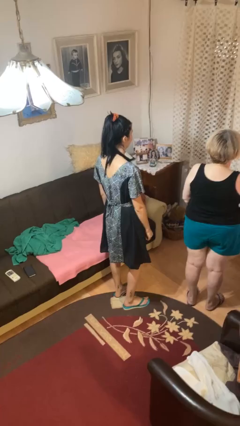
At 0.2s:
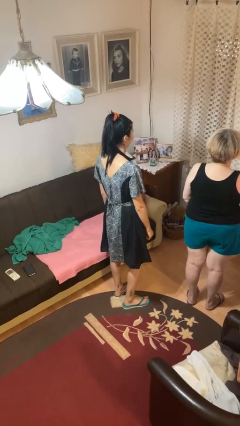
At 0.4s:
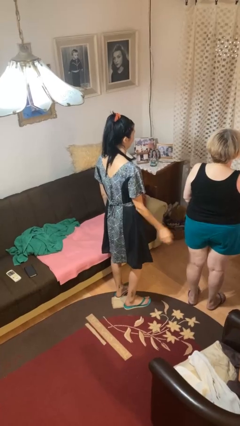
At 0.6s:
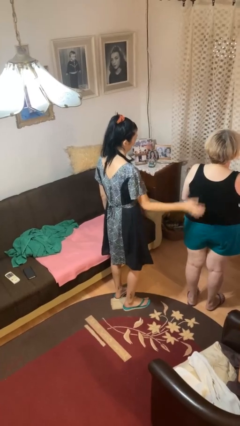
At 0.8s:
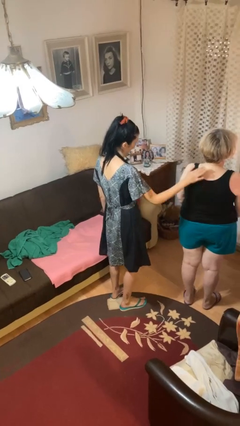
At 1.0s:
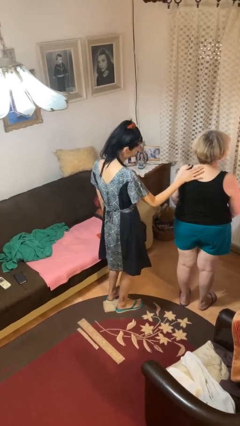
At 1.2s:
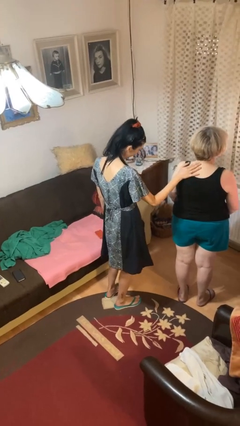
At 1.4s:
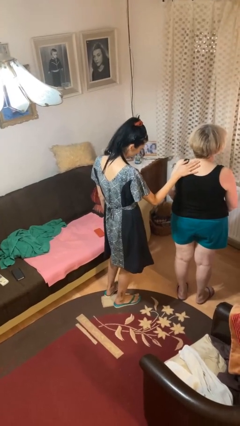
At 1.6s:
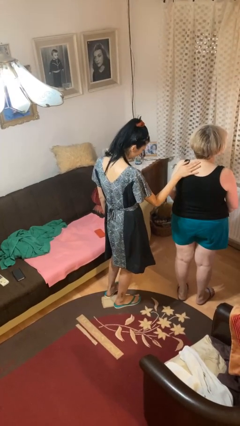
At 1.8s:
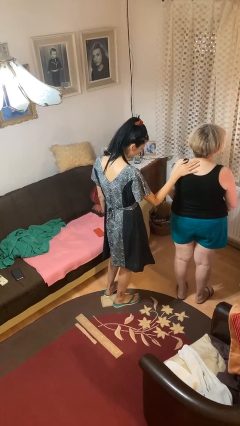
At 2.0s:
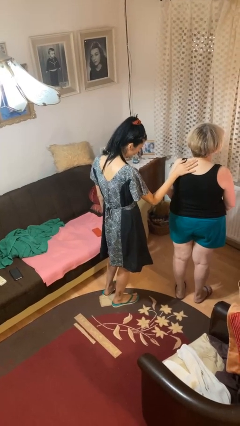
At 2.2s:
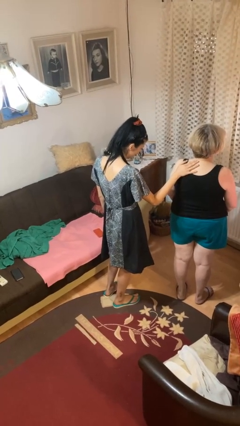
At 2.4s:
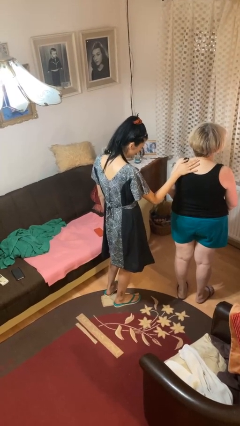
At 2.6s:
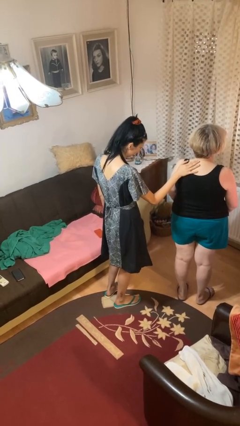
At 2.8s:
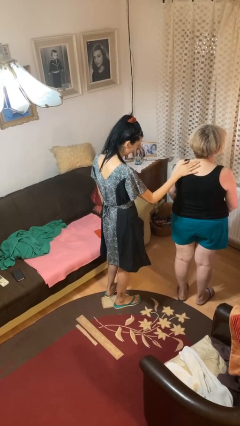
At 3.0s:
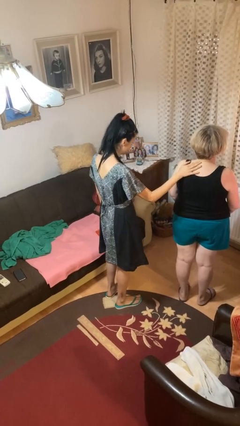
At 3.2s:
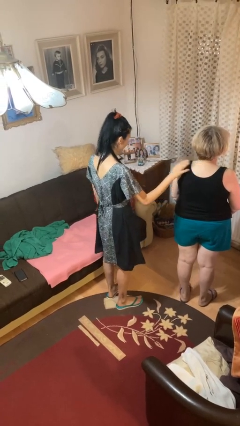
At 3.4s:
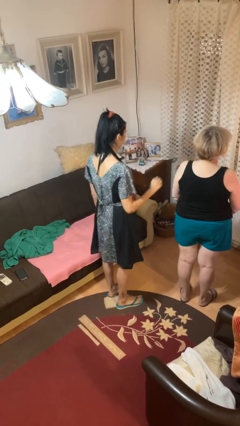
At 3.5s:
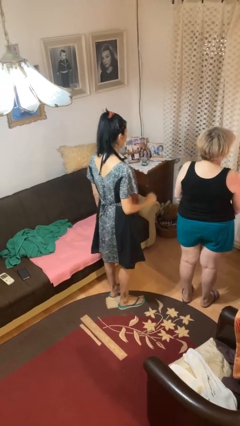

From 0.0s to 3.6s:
person touches back of person

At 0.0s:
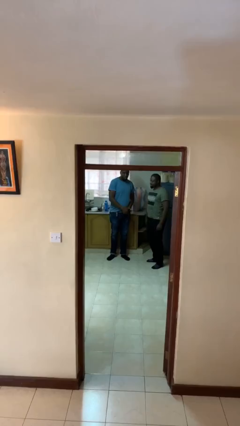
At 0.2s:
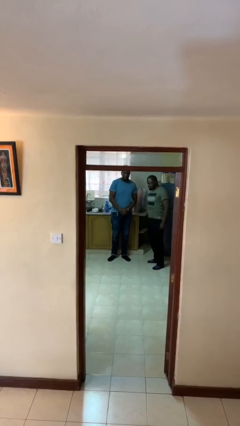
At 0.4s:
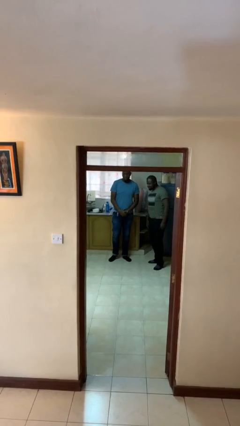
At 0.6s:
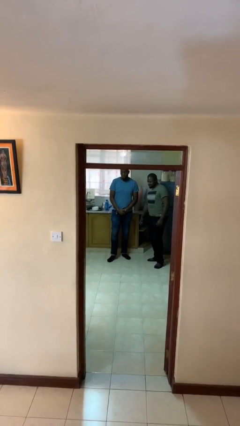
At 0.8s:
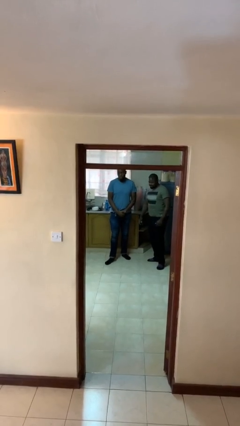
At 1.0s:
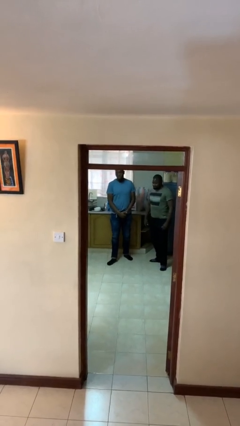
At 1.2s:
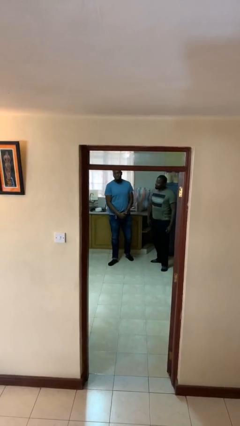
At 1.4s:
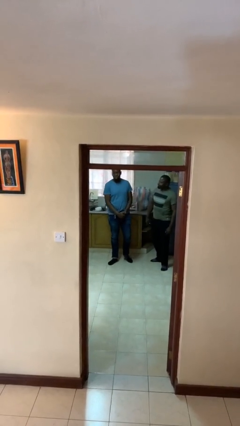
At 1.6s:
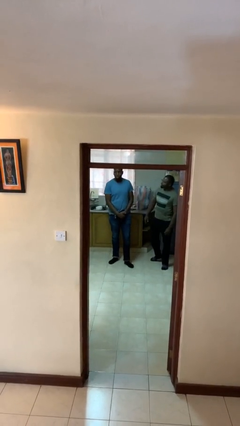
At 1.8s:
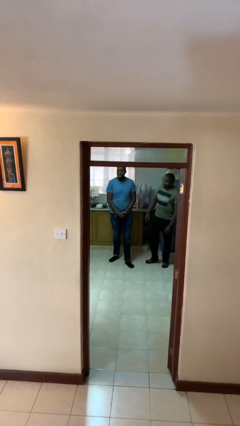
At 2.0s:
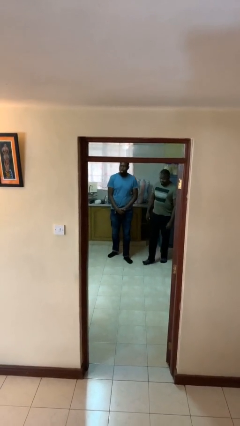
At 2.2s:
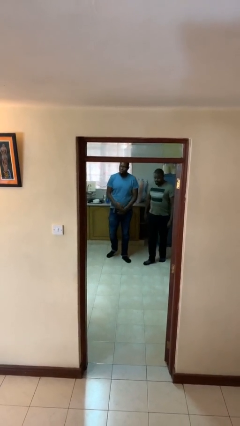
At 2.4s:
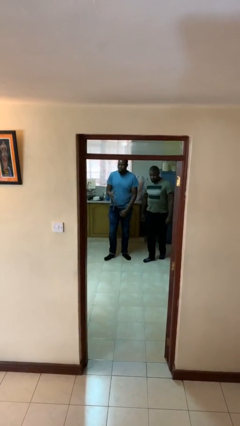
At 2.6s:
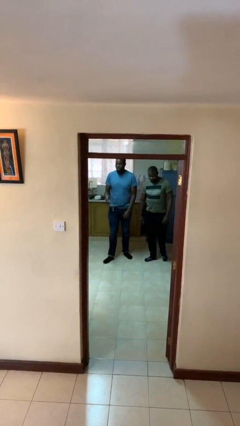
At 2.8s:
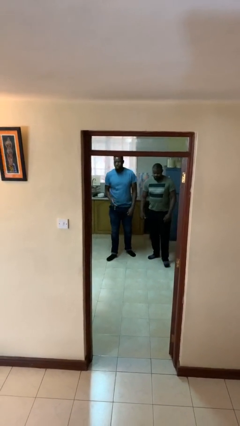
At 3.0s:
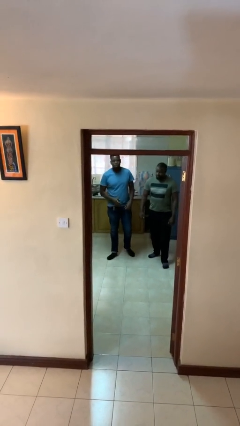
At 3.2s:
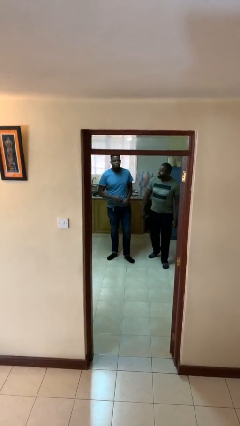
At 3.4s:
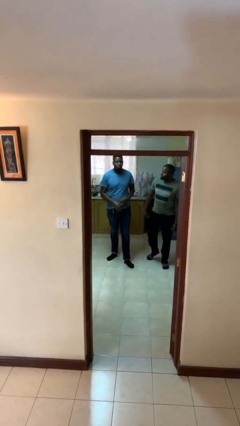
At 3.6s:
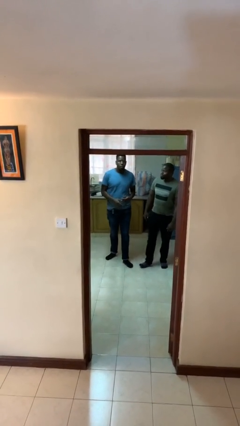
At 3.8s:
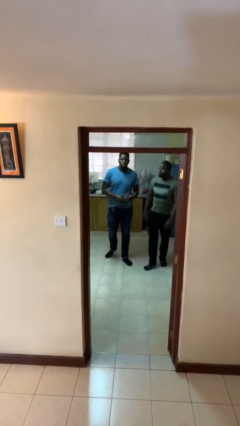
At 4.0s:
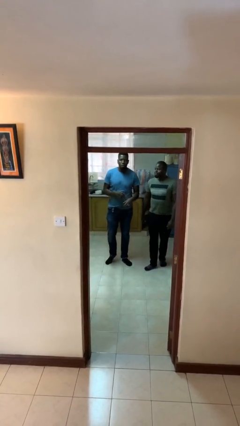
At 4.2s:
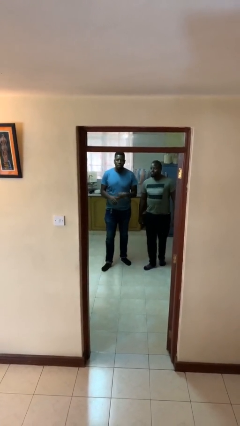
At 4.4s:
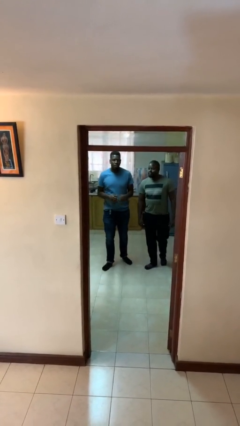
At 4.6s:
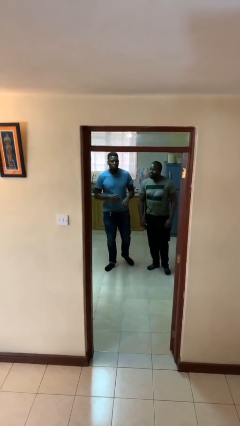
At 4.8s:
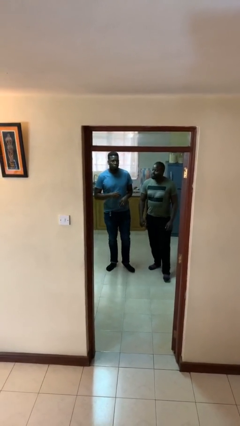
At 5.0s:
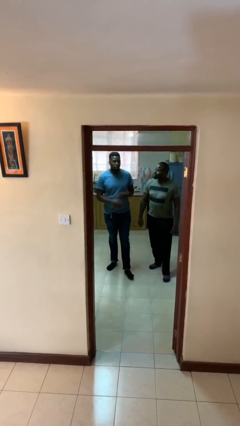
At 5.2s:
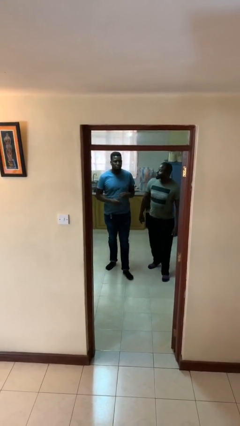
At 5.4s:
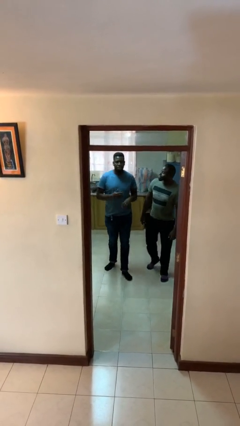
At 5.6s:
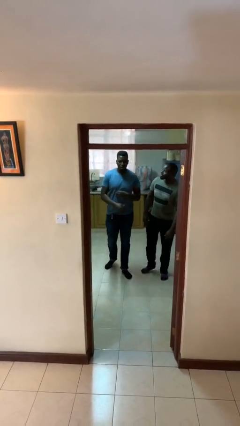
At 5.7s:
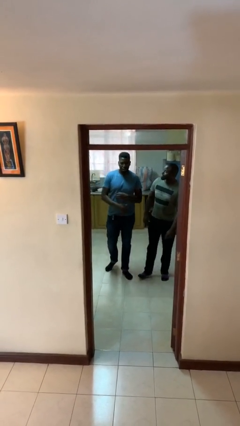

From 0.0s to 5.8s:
person talks to person

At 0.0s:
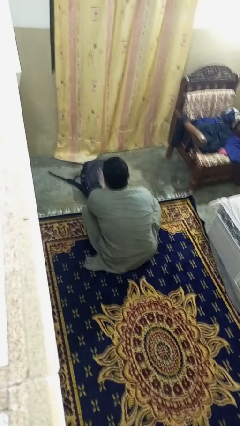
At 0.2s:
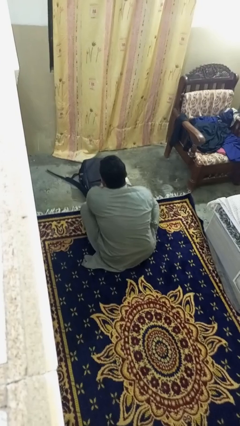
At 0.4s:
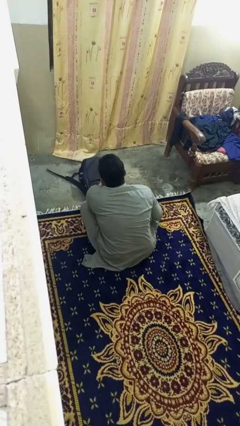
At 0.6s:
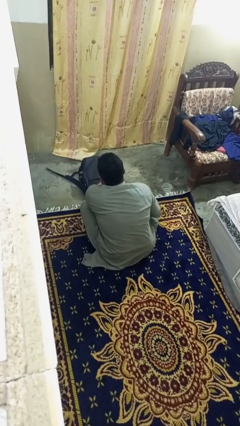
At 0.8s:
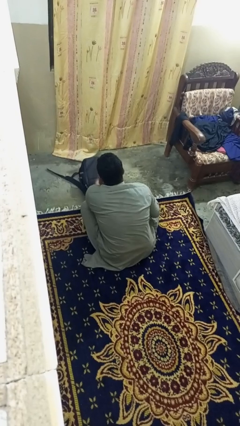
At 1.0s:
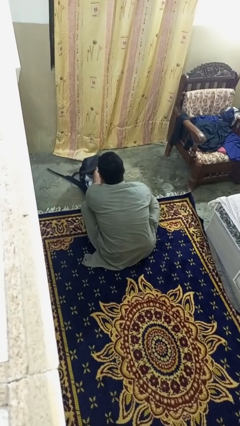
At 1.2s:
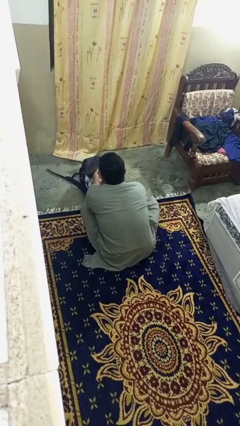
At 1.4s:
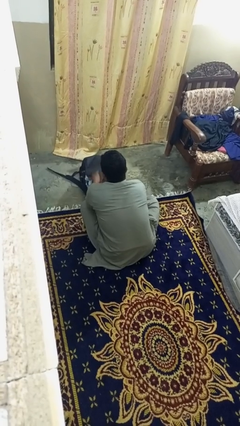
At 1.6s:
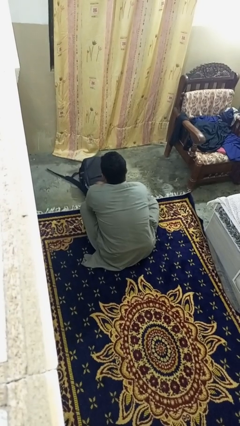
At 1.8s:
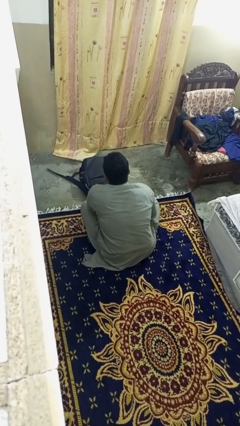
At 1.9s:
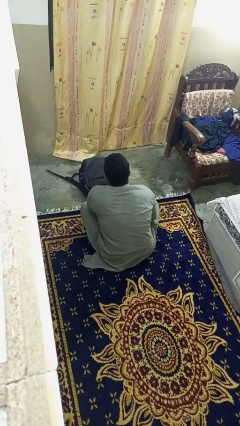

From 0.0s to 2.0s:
person puts object into bag

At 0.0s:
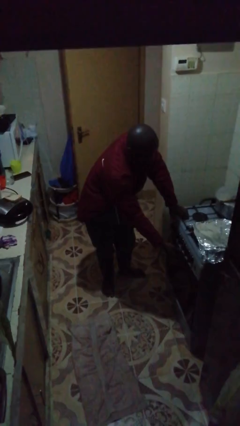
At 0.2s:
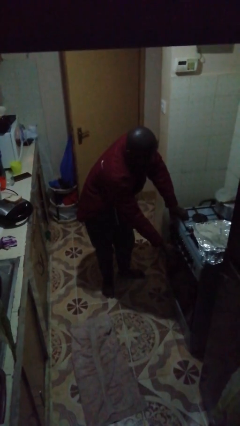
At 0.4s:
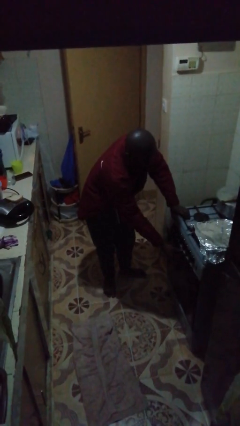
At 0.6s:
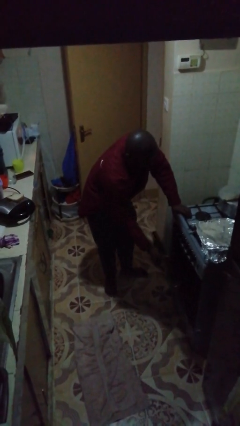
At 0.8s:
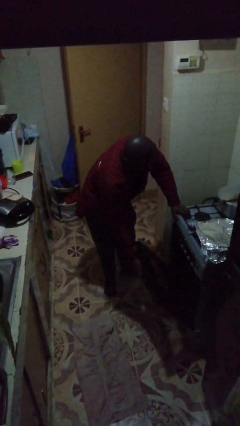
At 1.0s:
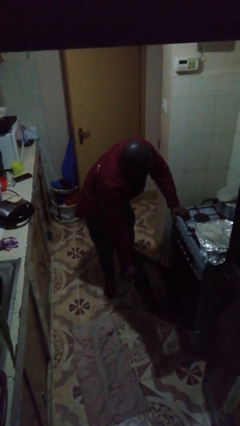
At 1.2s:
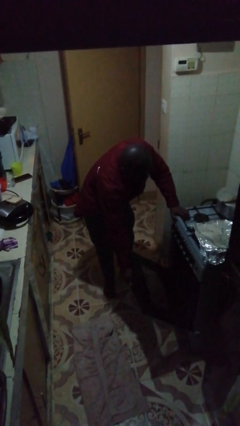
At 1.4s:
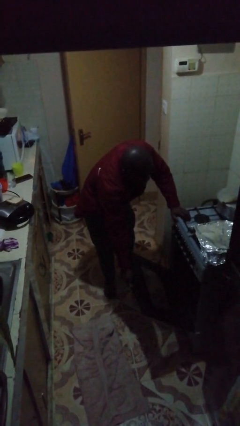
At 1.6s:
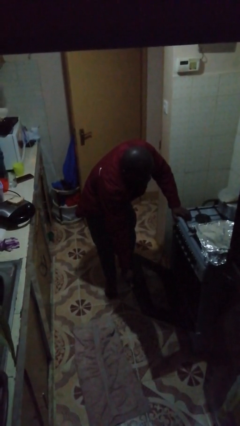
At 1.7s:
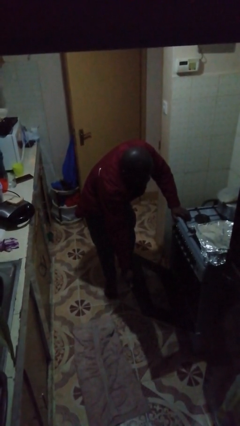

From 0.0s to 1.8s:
person opens oven door

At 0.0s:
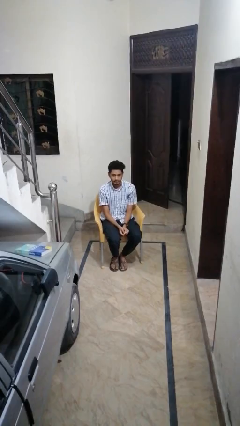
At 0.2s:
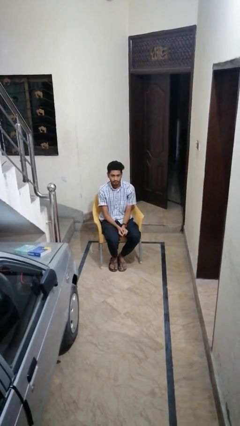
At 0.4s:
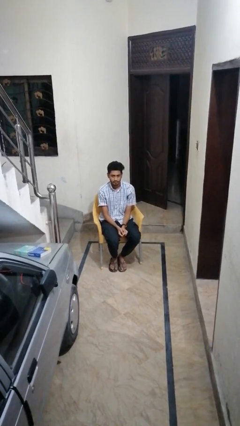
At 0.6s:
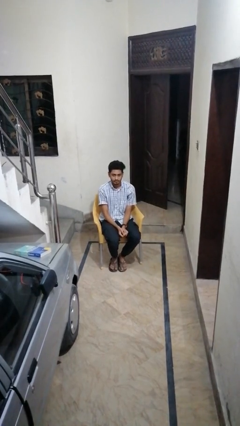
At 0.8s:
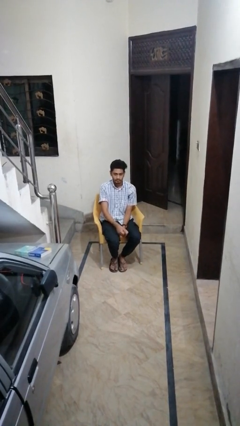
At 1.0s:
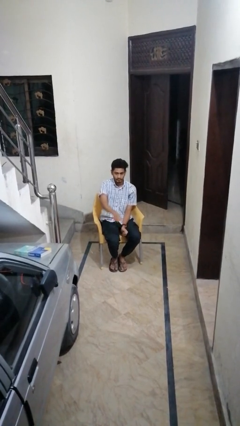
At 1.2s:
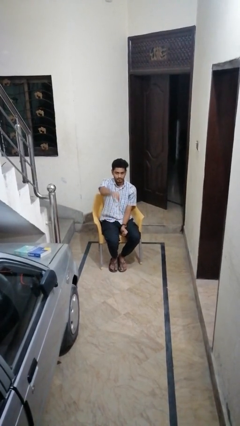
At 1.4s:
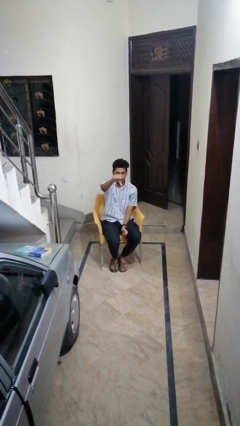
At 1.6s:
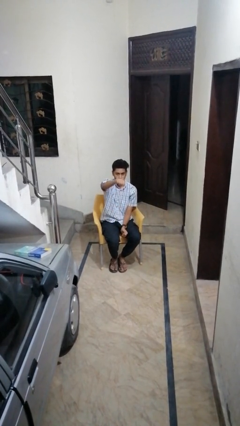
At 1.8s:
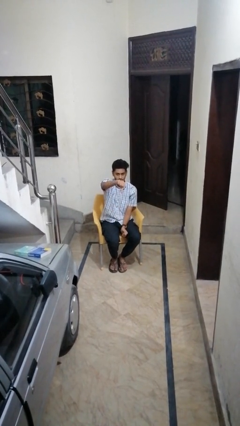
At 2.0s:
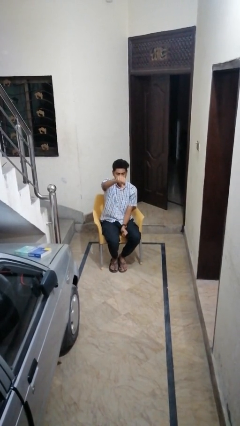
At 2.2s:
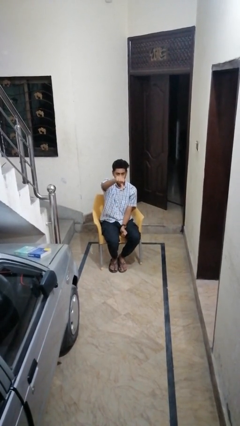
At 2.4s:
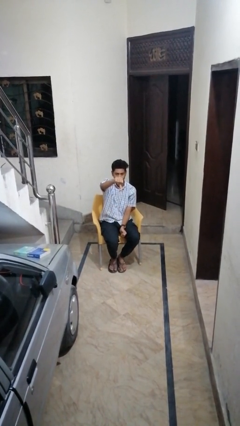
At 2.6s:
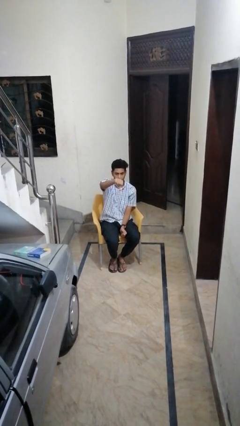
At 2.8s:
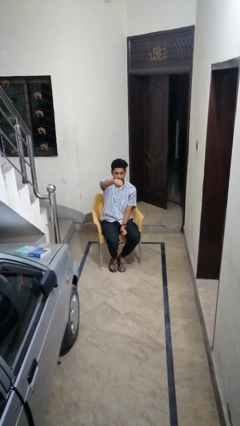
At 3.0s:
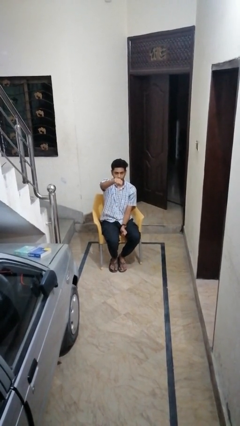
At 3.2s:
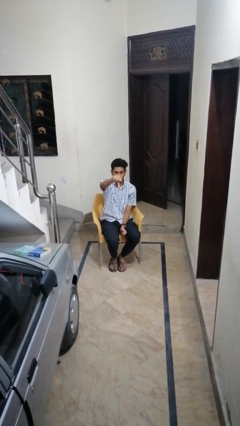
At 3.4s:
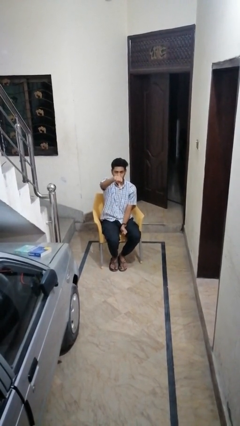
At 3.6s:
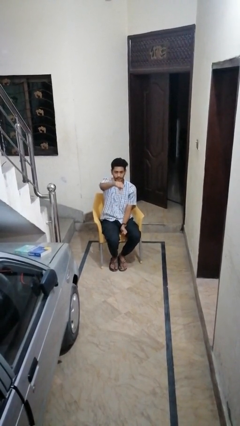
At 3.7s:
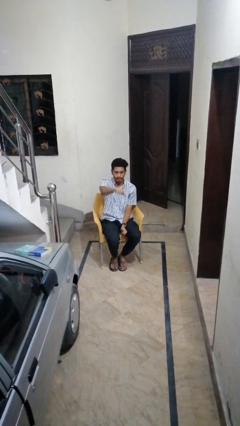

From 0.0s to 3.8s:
person gestures thumbs down

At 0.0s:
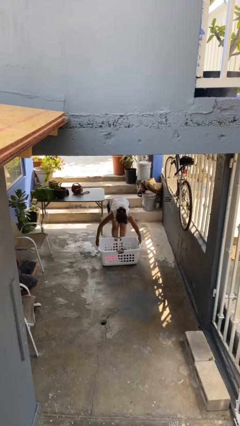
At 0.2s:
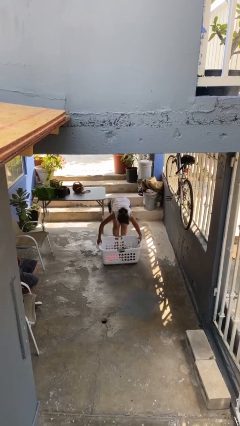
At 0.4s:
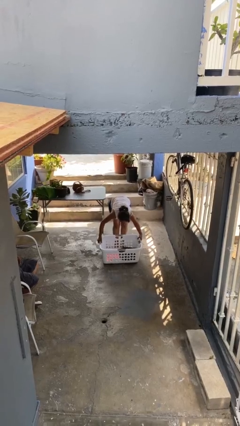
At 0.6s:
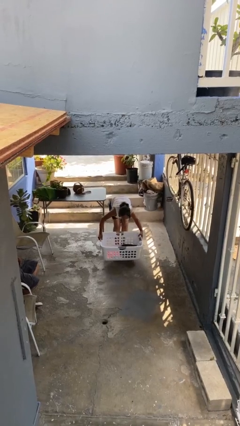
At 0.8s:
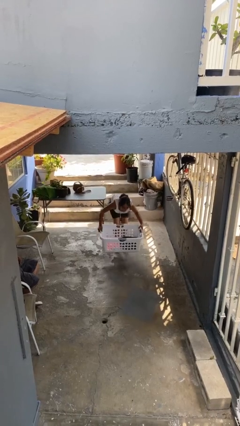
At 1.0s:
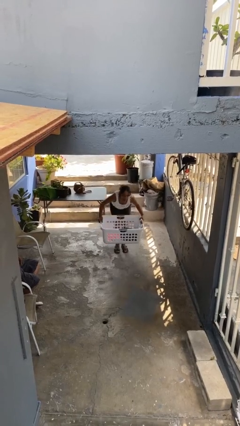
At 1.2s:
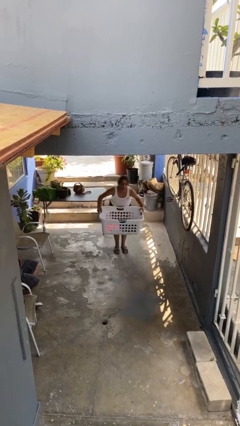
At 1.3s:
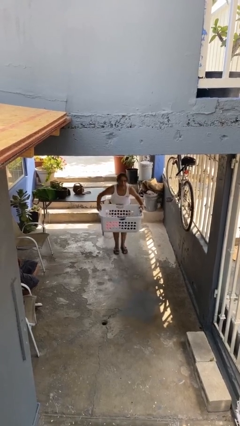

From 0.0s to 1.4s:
person picks up object from floor
